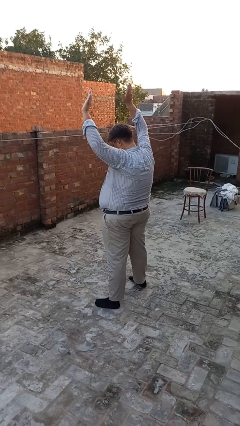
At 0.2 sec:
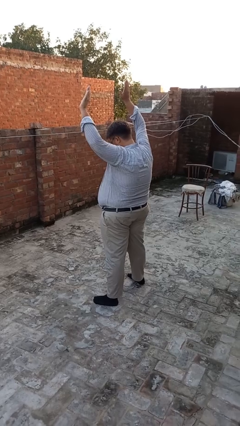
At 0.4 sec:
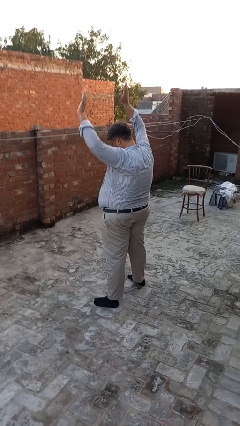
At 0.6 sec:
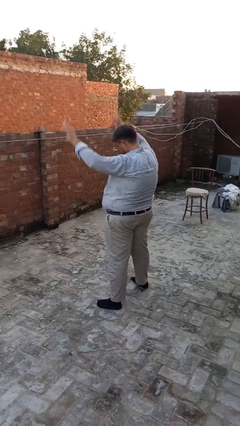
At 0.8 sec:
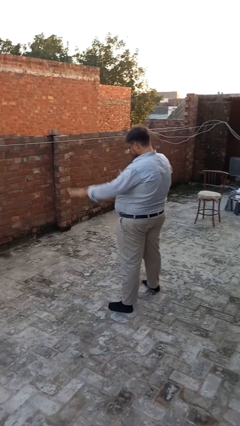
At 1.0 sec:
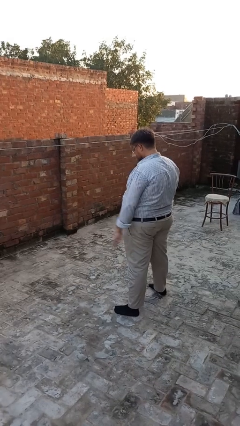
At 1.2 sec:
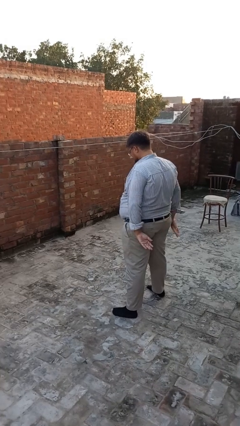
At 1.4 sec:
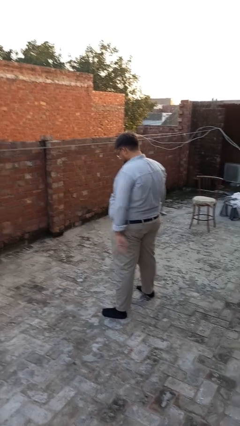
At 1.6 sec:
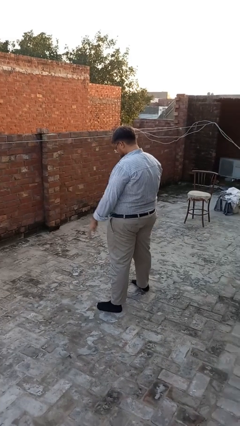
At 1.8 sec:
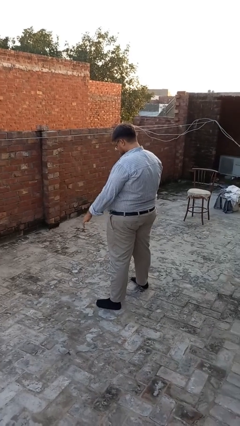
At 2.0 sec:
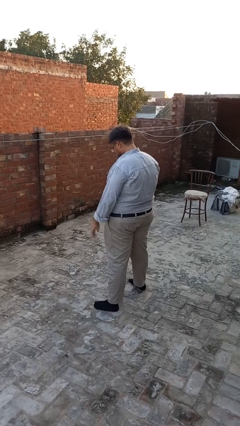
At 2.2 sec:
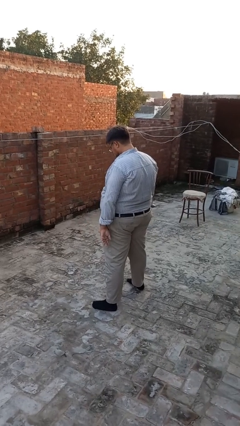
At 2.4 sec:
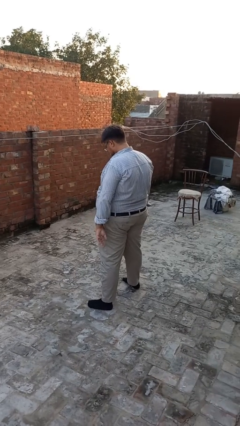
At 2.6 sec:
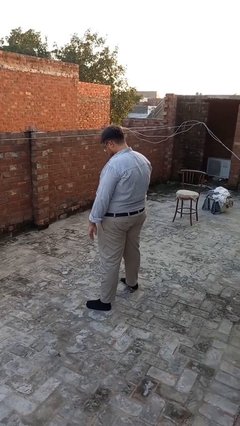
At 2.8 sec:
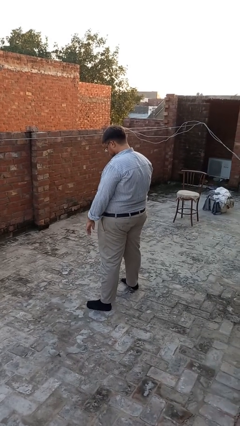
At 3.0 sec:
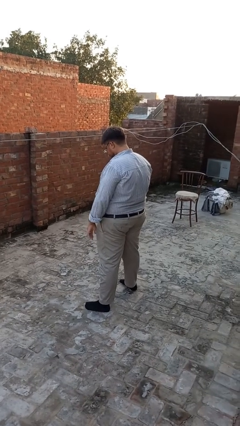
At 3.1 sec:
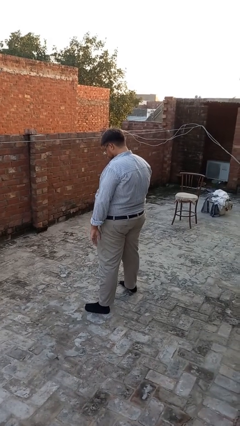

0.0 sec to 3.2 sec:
person gestures swipe down

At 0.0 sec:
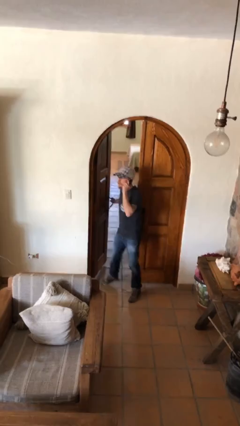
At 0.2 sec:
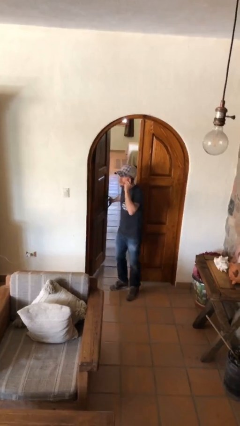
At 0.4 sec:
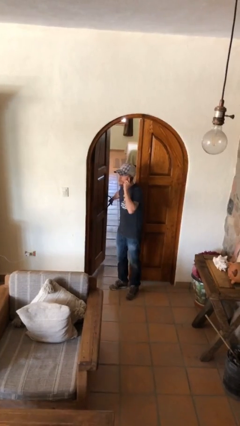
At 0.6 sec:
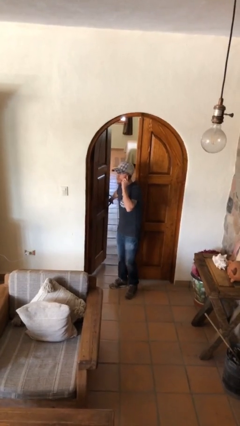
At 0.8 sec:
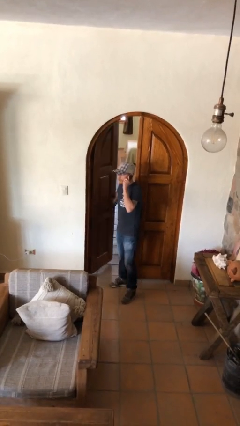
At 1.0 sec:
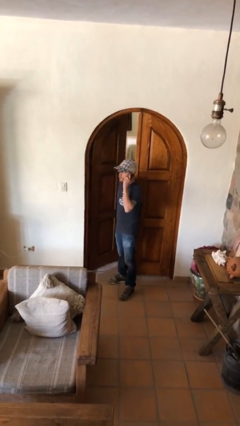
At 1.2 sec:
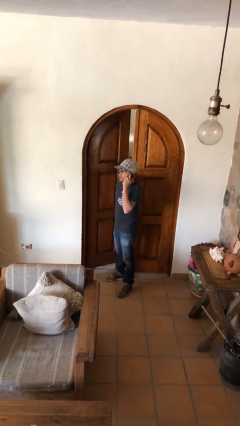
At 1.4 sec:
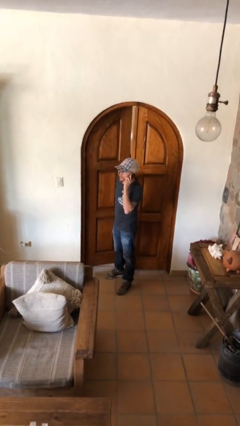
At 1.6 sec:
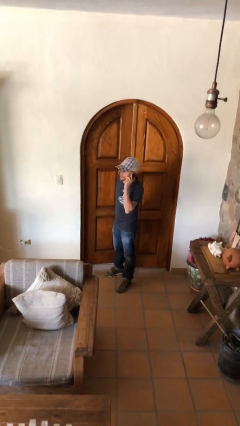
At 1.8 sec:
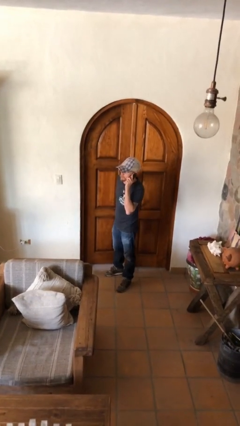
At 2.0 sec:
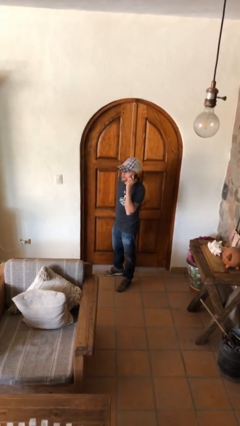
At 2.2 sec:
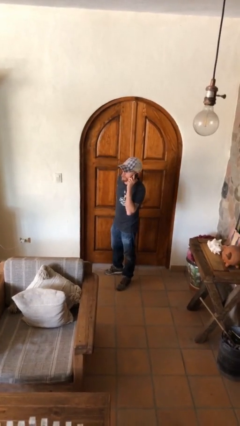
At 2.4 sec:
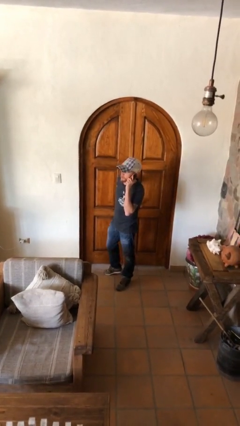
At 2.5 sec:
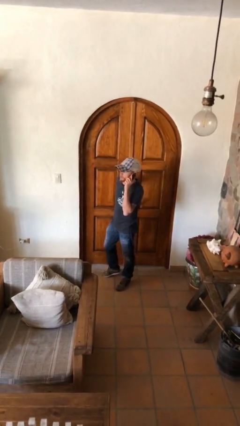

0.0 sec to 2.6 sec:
person closes facility door

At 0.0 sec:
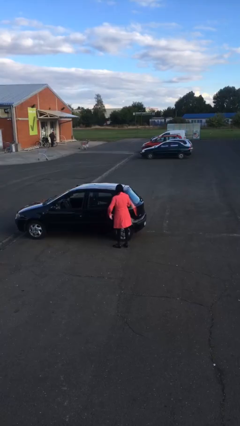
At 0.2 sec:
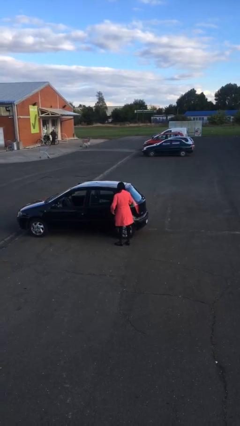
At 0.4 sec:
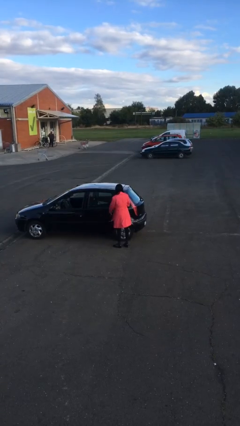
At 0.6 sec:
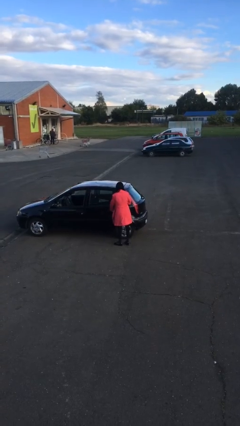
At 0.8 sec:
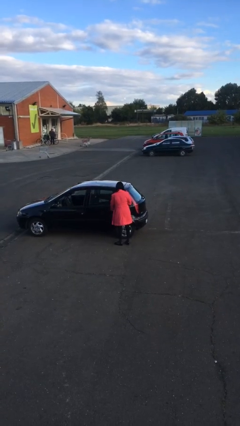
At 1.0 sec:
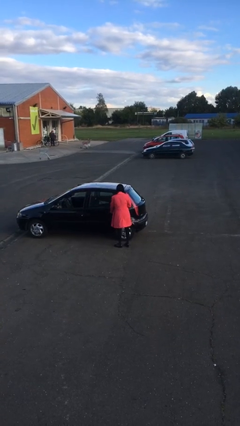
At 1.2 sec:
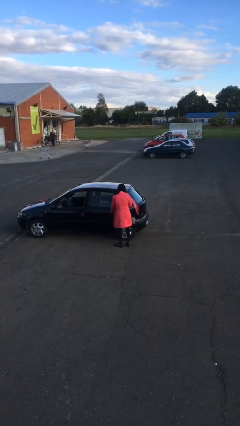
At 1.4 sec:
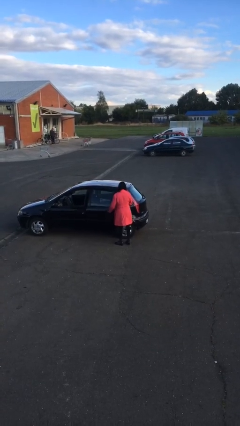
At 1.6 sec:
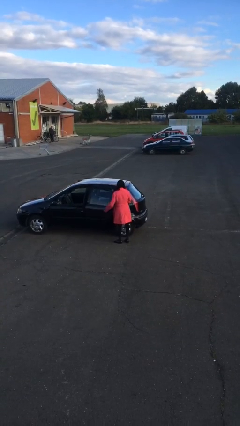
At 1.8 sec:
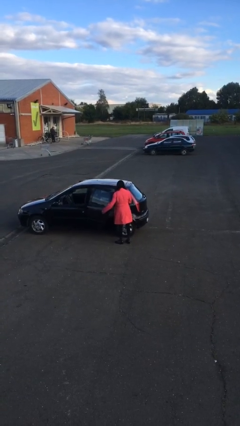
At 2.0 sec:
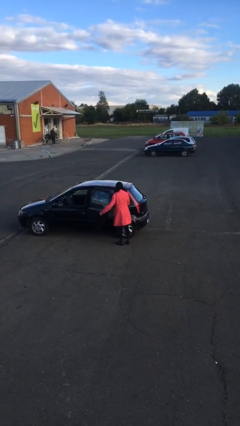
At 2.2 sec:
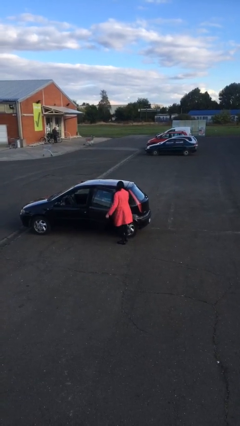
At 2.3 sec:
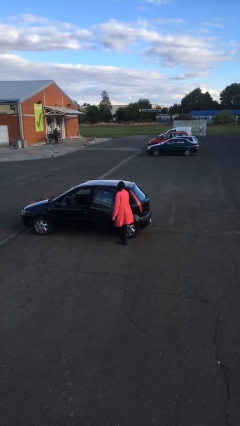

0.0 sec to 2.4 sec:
person opens car door

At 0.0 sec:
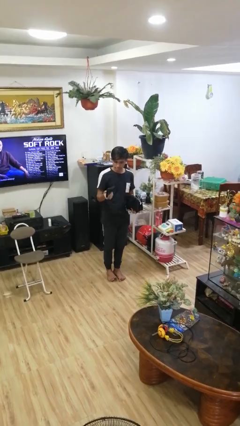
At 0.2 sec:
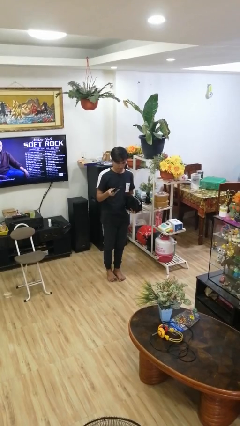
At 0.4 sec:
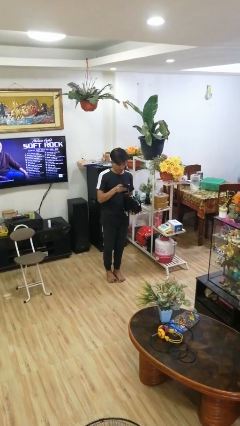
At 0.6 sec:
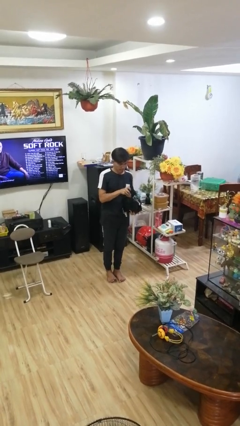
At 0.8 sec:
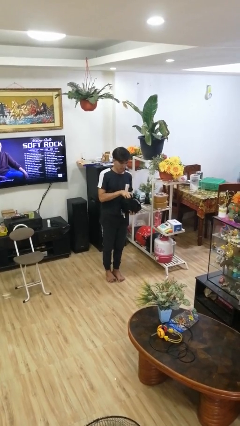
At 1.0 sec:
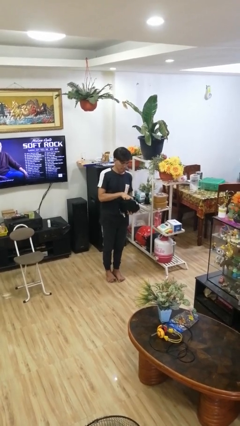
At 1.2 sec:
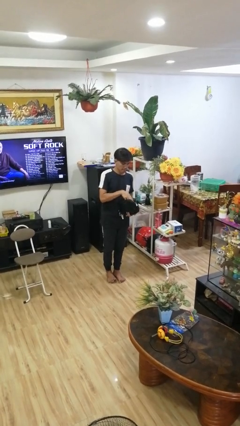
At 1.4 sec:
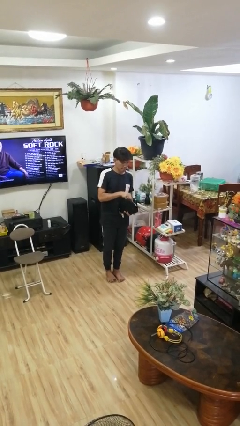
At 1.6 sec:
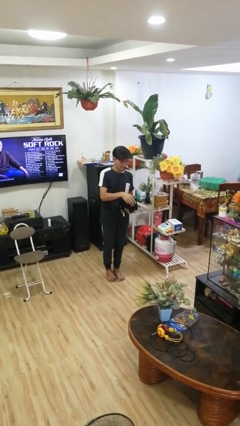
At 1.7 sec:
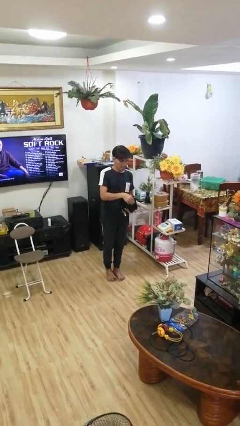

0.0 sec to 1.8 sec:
person puts object into purse

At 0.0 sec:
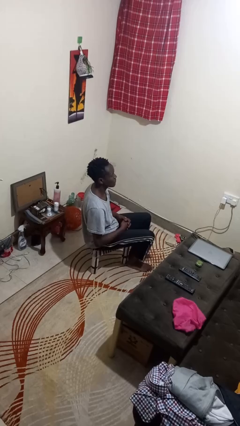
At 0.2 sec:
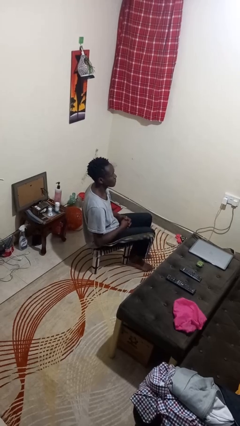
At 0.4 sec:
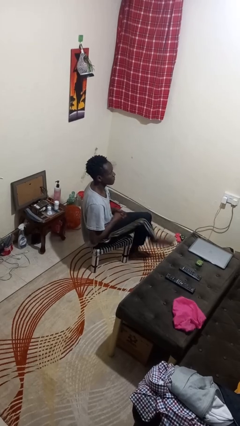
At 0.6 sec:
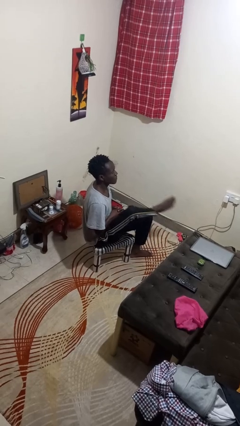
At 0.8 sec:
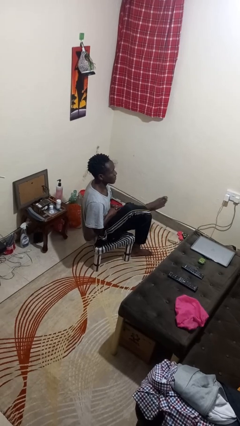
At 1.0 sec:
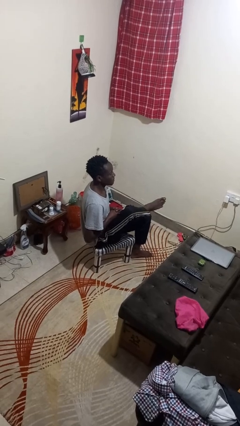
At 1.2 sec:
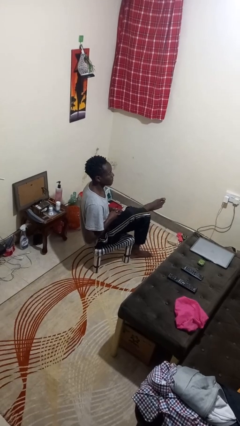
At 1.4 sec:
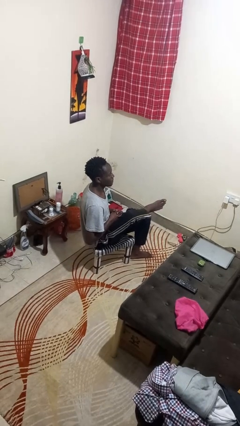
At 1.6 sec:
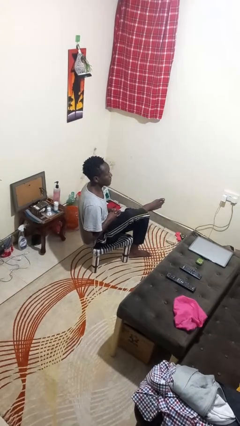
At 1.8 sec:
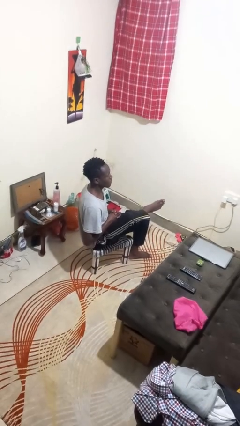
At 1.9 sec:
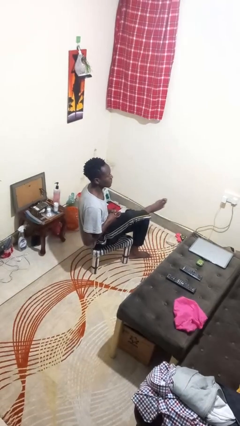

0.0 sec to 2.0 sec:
person crosses legs

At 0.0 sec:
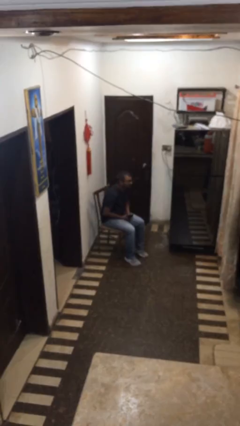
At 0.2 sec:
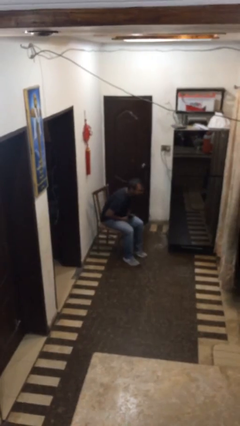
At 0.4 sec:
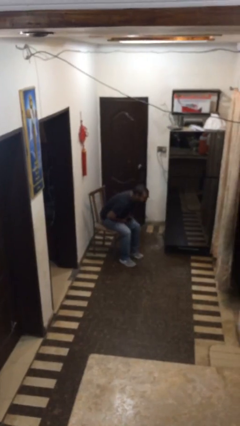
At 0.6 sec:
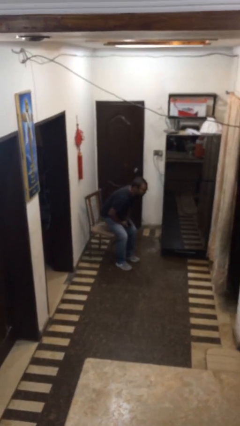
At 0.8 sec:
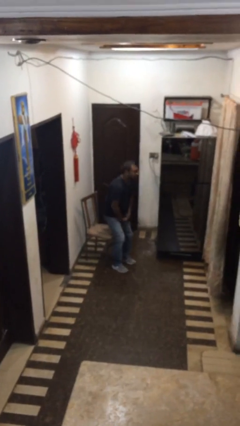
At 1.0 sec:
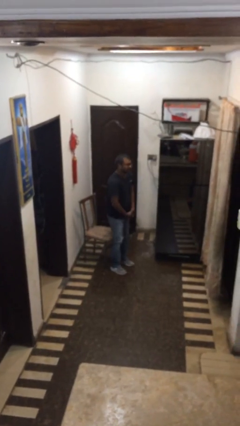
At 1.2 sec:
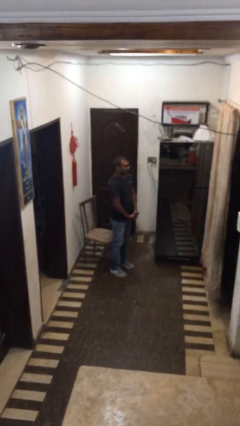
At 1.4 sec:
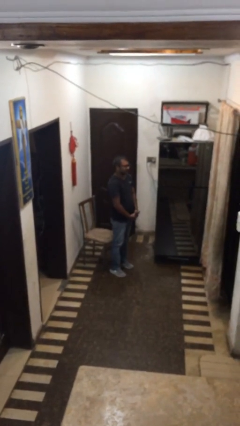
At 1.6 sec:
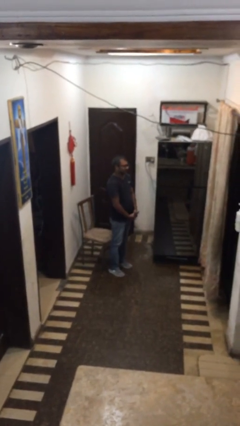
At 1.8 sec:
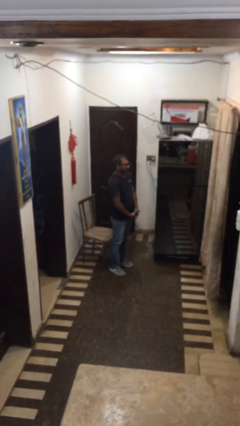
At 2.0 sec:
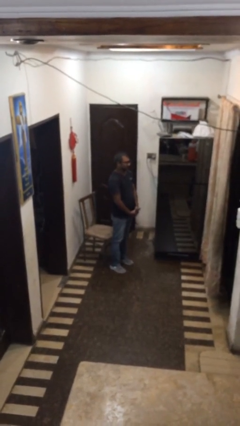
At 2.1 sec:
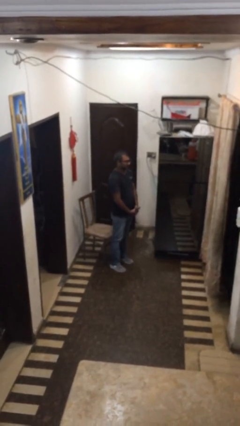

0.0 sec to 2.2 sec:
person stands up

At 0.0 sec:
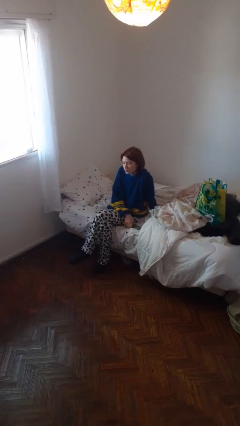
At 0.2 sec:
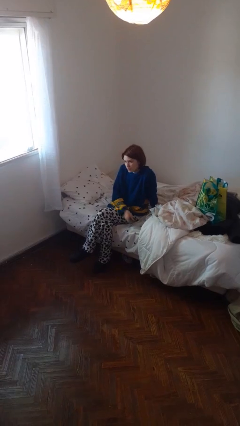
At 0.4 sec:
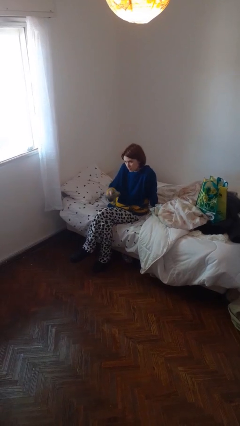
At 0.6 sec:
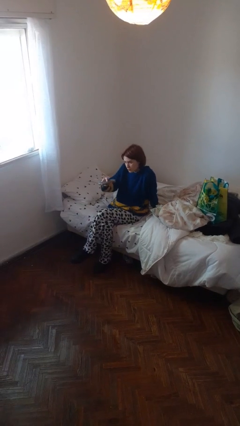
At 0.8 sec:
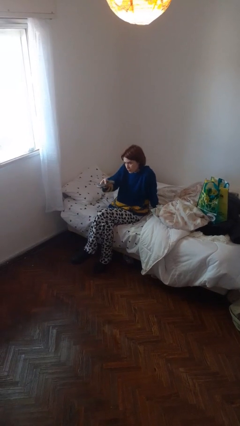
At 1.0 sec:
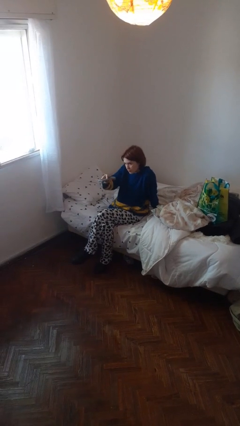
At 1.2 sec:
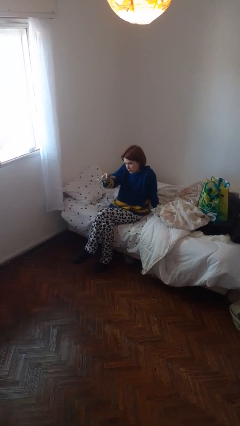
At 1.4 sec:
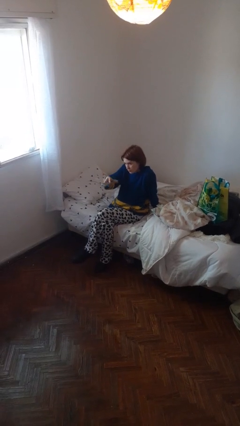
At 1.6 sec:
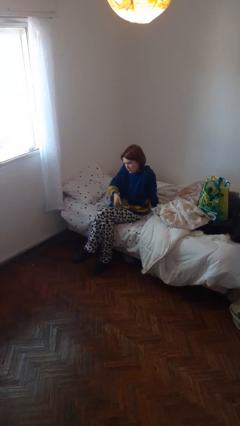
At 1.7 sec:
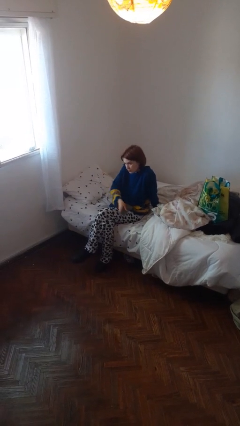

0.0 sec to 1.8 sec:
person uses television remote

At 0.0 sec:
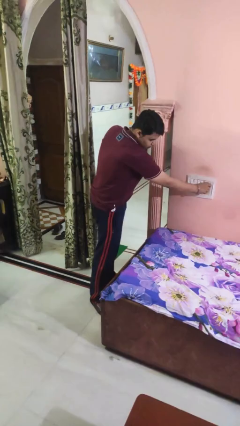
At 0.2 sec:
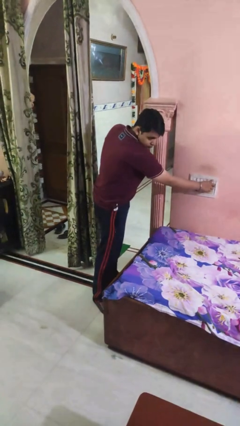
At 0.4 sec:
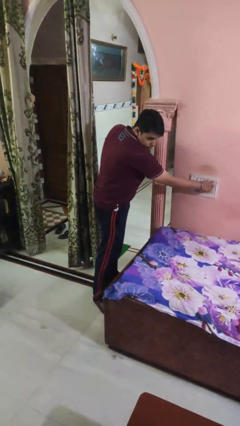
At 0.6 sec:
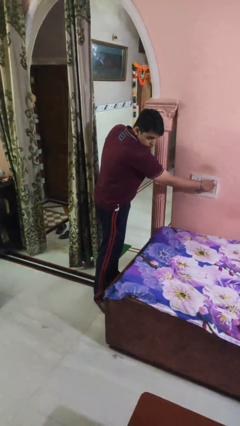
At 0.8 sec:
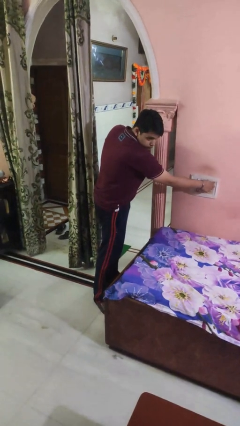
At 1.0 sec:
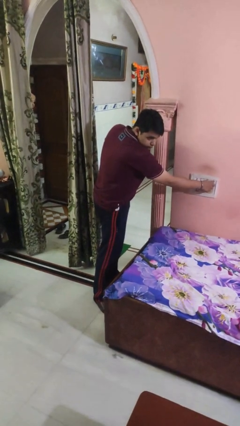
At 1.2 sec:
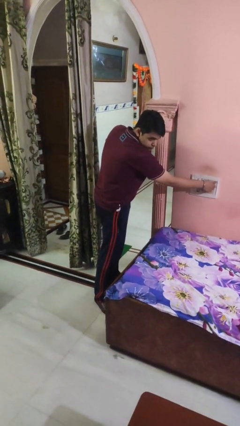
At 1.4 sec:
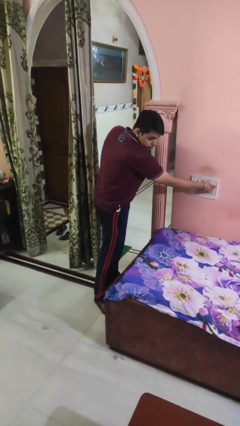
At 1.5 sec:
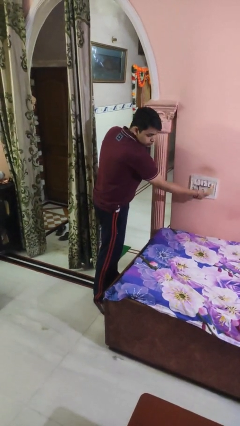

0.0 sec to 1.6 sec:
person adjusts thermostat
